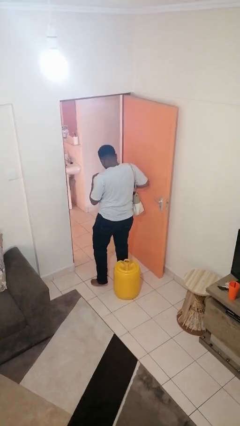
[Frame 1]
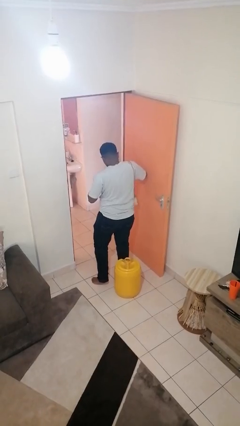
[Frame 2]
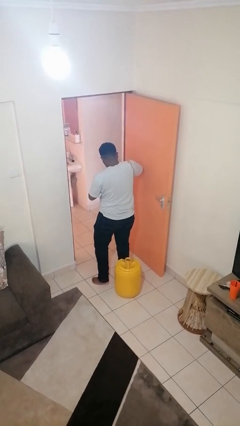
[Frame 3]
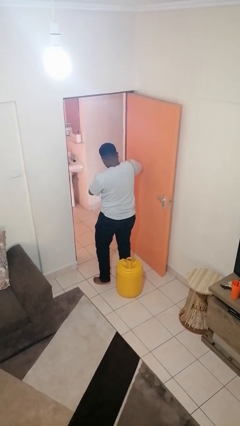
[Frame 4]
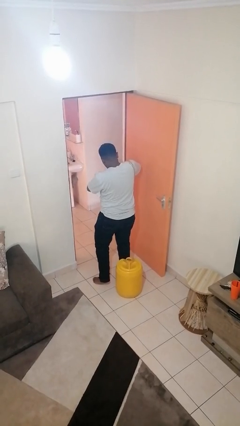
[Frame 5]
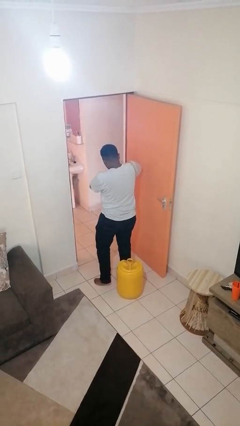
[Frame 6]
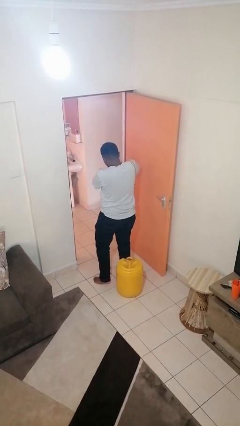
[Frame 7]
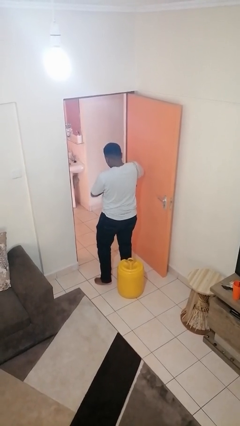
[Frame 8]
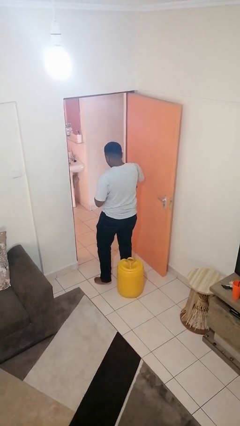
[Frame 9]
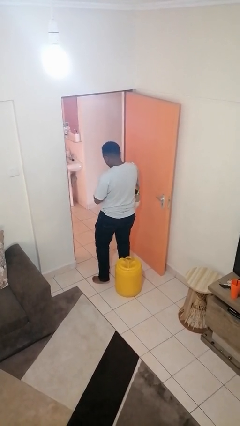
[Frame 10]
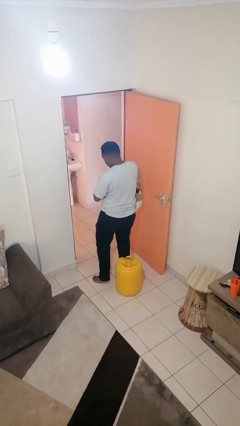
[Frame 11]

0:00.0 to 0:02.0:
person puts object into purse

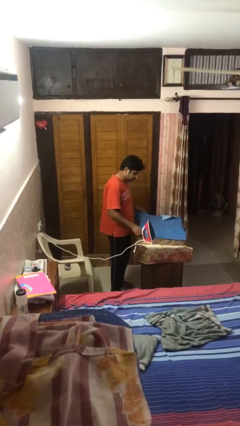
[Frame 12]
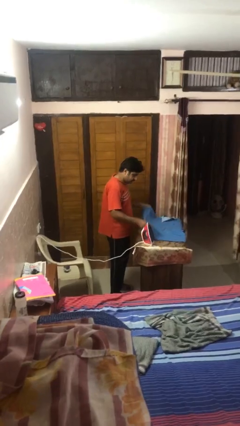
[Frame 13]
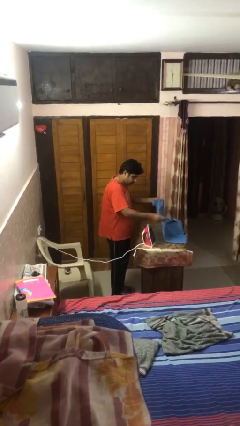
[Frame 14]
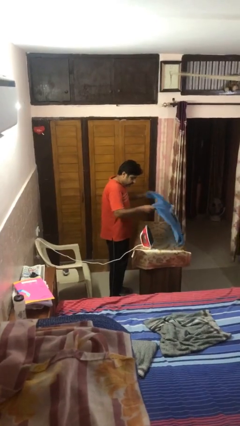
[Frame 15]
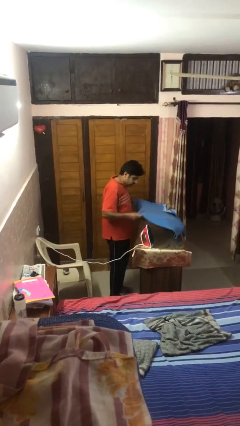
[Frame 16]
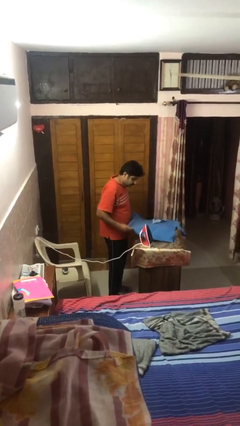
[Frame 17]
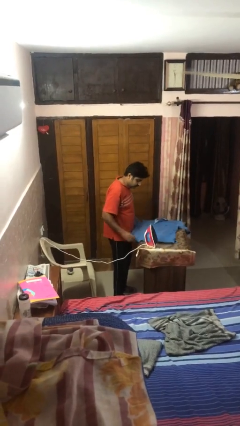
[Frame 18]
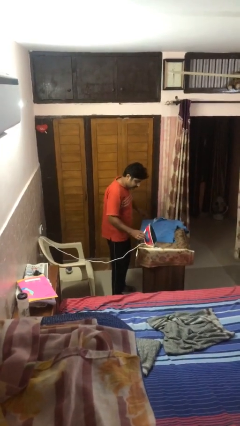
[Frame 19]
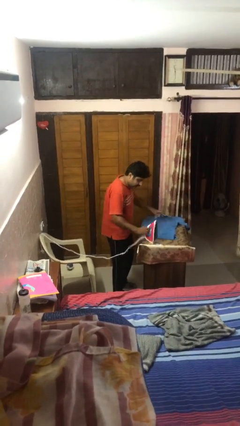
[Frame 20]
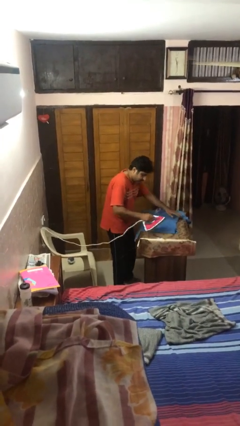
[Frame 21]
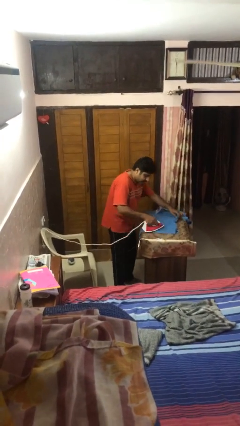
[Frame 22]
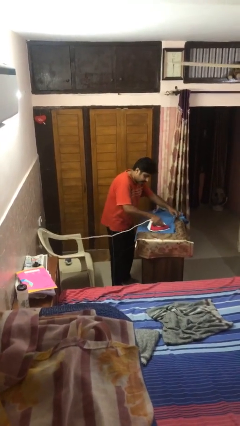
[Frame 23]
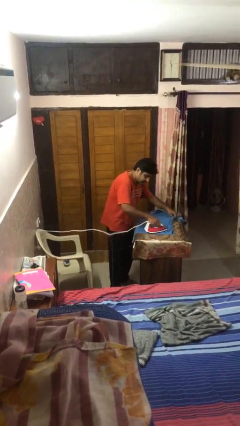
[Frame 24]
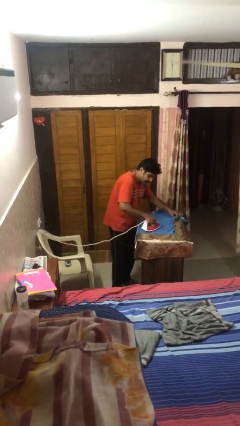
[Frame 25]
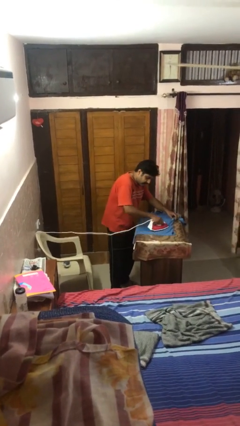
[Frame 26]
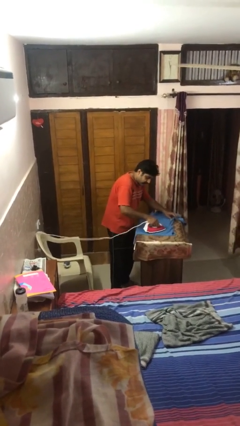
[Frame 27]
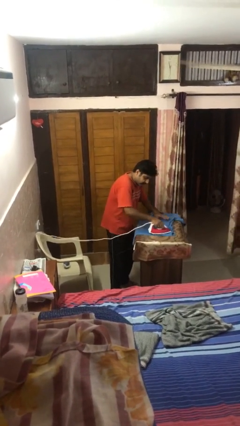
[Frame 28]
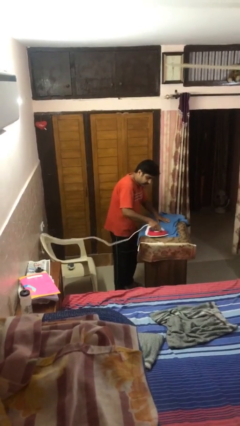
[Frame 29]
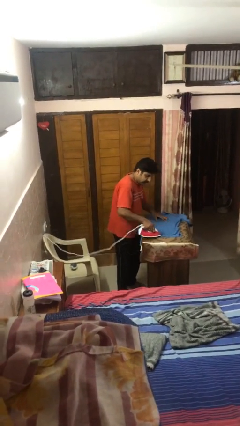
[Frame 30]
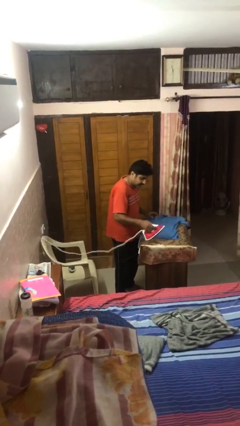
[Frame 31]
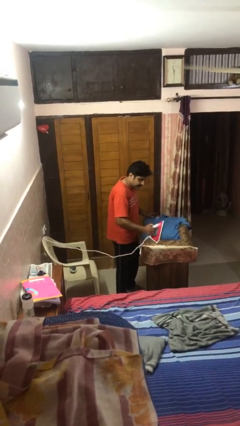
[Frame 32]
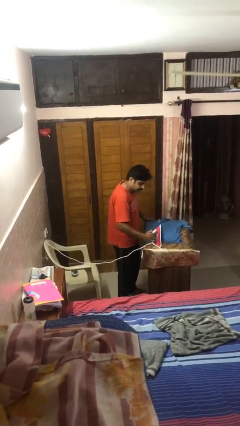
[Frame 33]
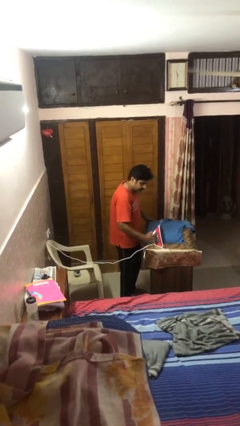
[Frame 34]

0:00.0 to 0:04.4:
person irons clothes

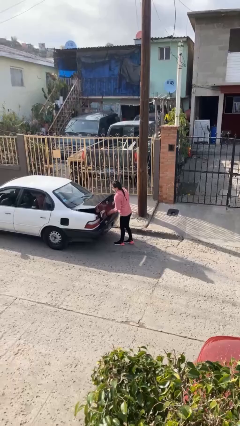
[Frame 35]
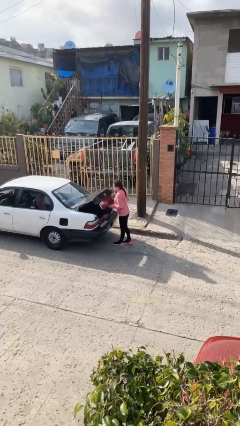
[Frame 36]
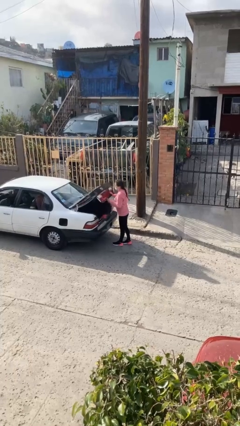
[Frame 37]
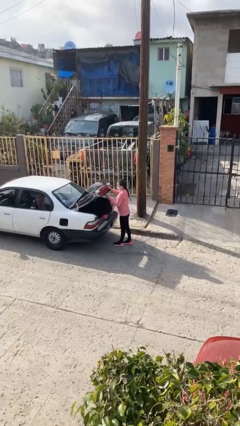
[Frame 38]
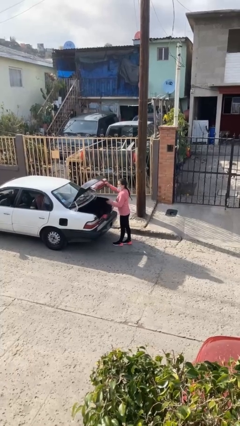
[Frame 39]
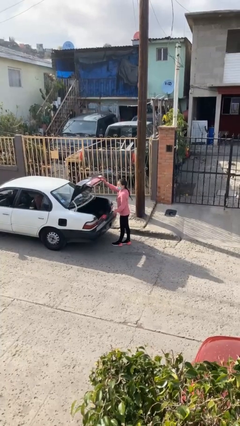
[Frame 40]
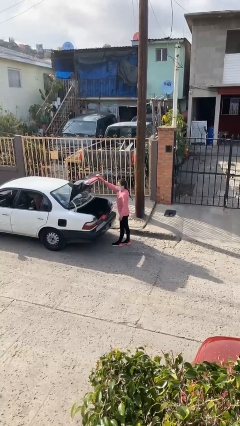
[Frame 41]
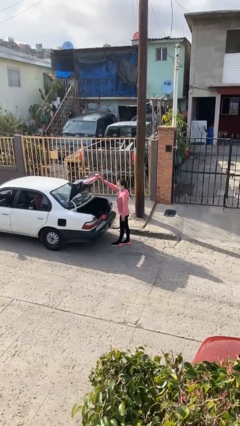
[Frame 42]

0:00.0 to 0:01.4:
person opens car trunk

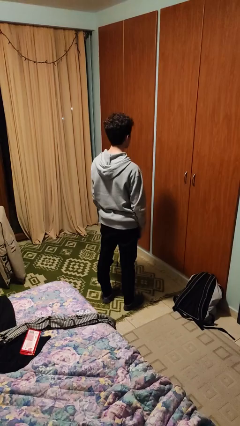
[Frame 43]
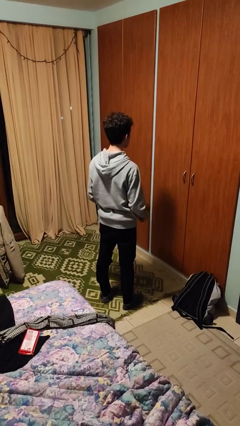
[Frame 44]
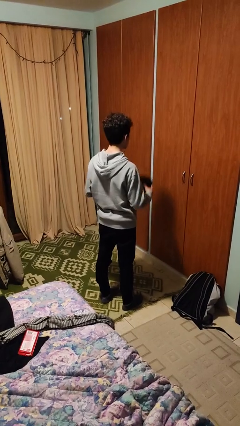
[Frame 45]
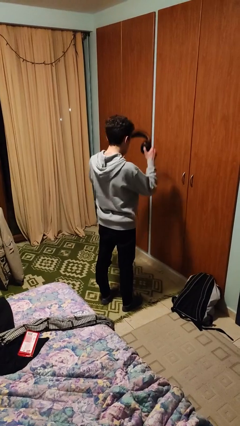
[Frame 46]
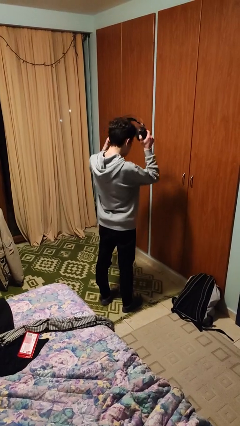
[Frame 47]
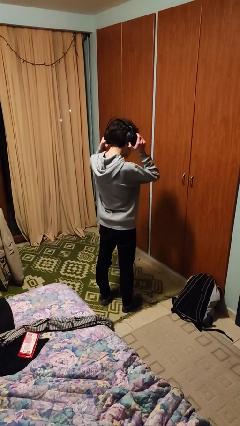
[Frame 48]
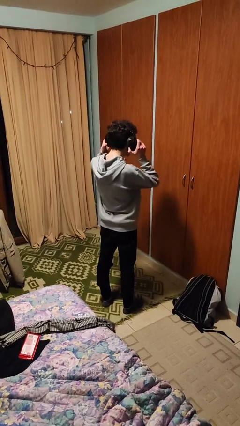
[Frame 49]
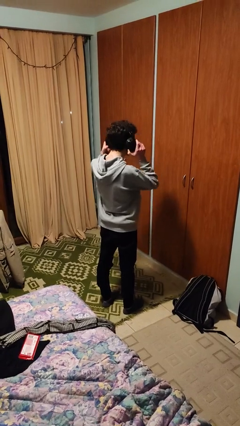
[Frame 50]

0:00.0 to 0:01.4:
person puts on headphones

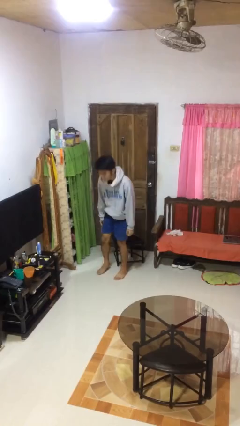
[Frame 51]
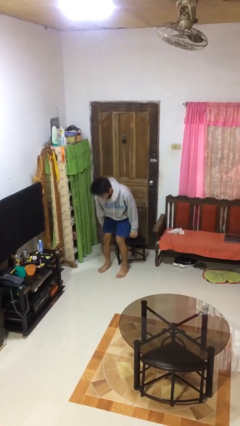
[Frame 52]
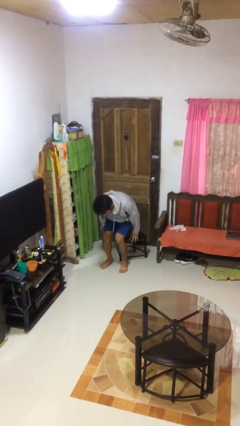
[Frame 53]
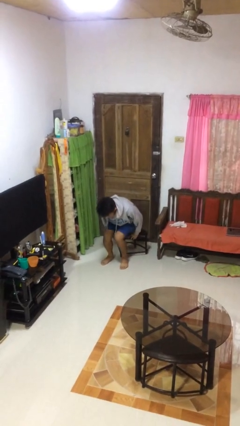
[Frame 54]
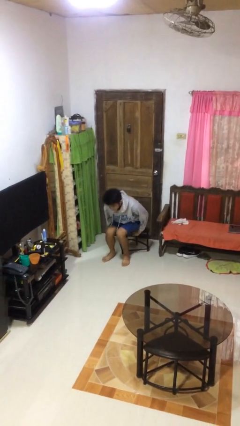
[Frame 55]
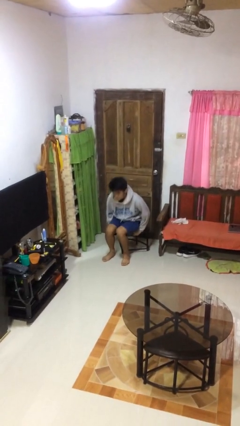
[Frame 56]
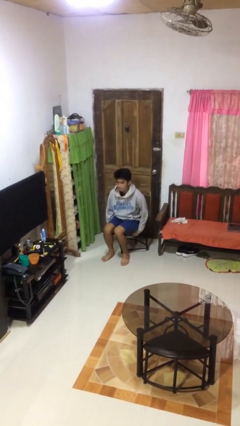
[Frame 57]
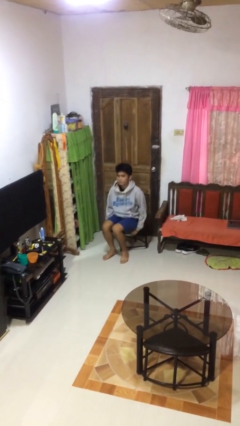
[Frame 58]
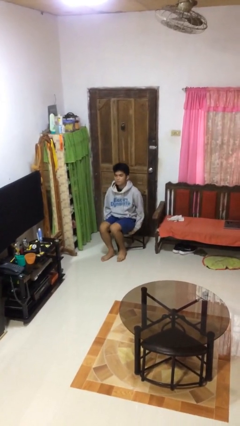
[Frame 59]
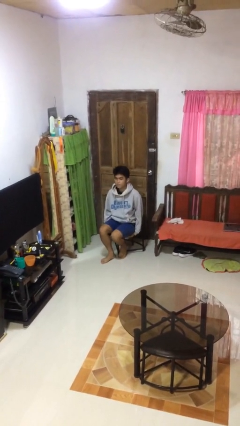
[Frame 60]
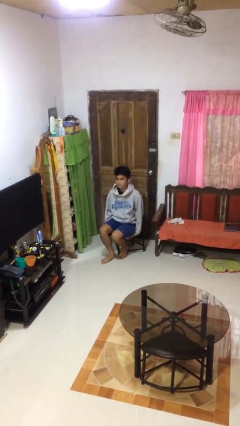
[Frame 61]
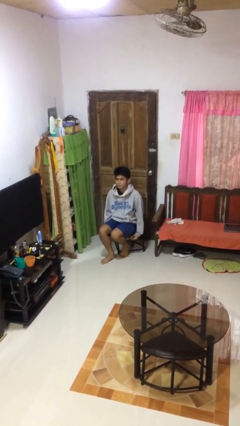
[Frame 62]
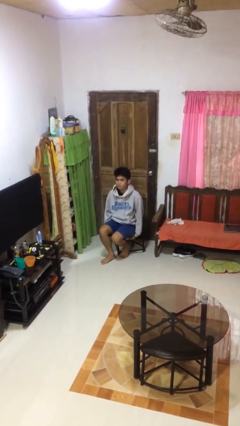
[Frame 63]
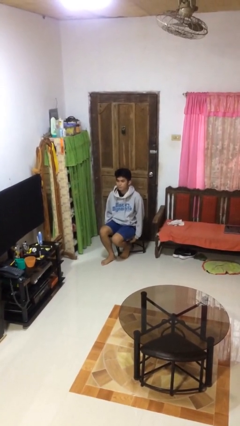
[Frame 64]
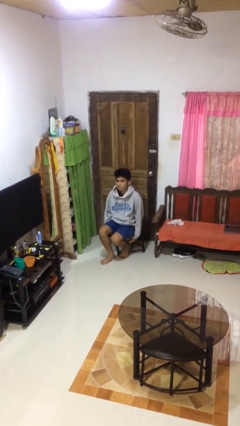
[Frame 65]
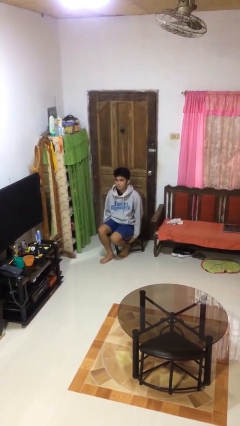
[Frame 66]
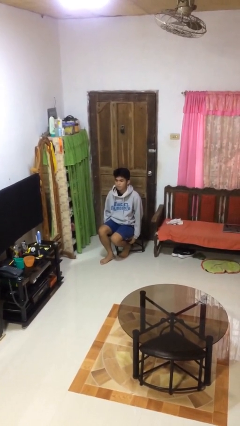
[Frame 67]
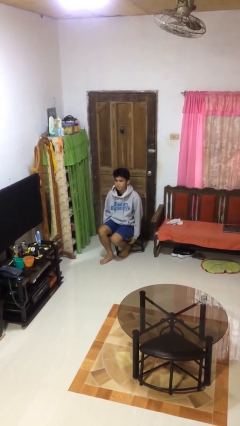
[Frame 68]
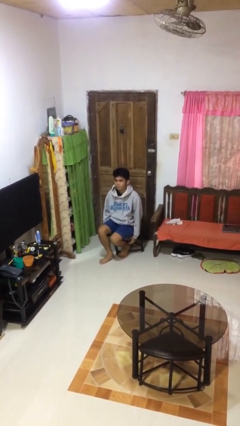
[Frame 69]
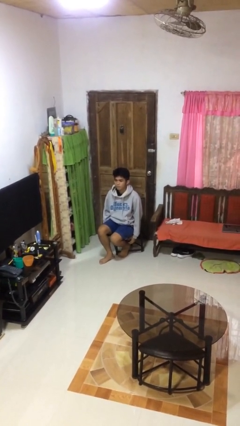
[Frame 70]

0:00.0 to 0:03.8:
person sits down

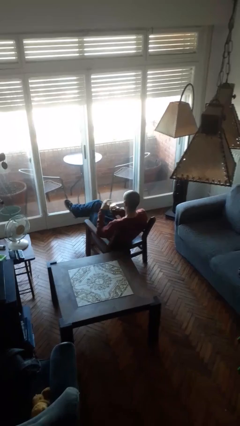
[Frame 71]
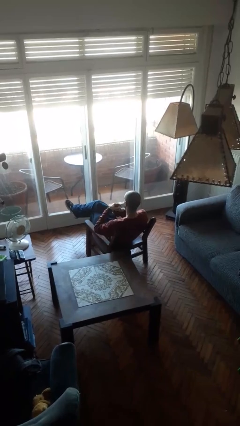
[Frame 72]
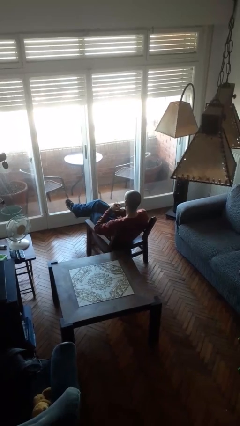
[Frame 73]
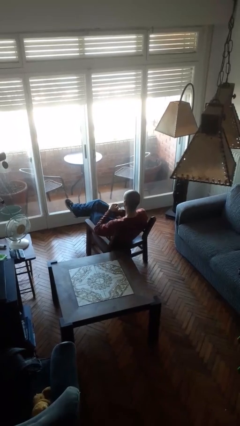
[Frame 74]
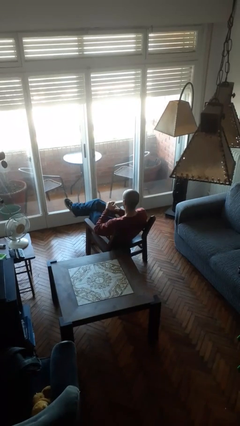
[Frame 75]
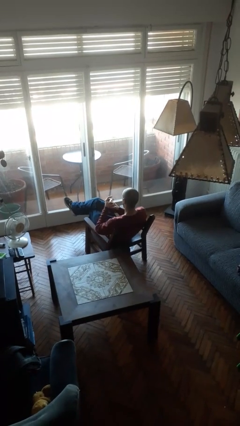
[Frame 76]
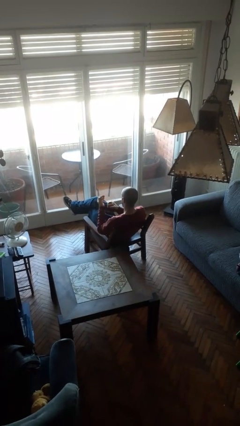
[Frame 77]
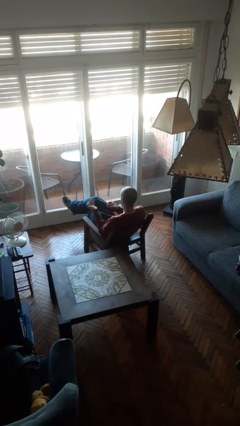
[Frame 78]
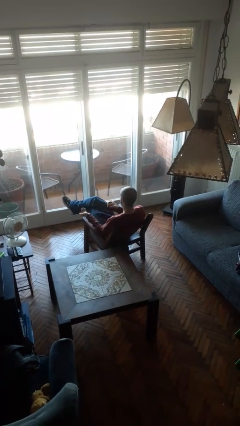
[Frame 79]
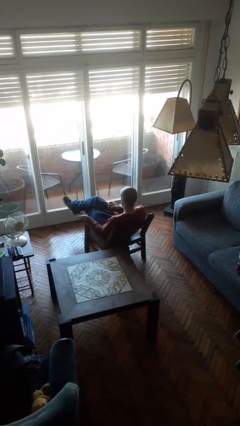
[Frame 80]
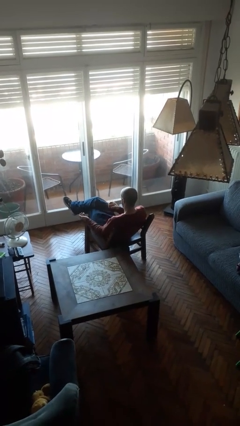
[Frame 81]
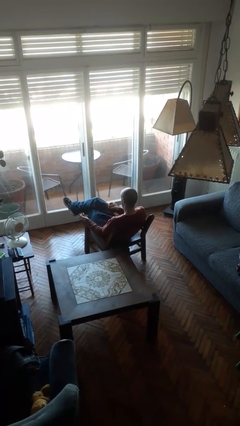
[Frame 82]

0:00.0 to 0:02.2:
person opens jar

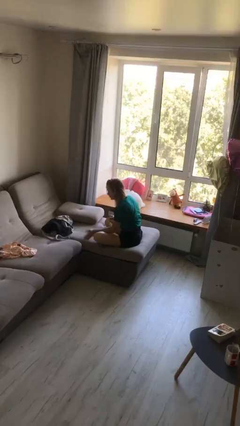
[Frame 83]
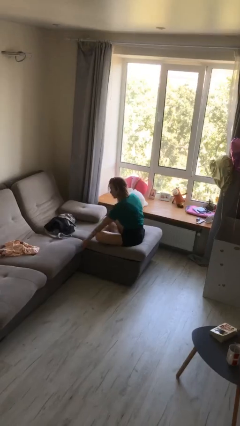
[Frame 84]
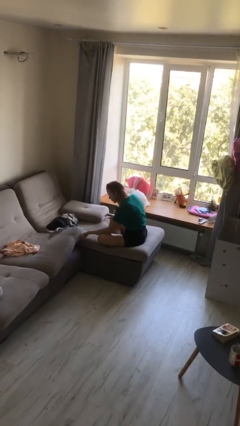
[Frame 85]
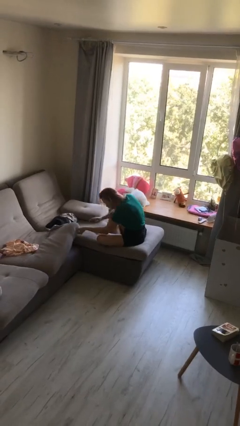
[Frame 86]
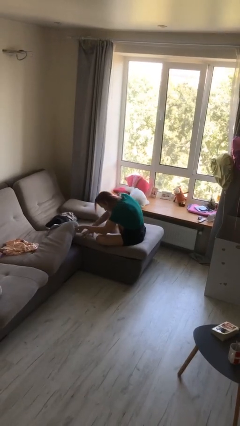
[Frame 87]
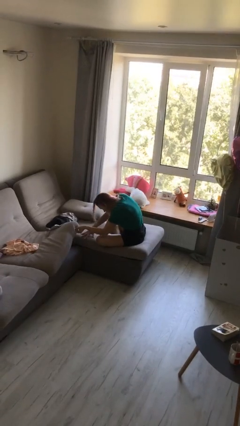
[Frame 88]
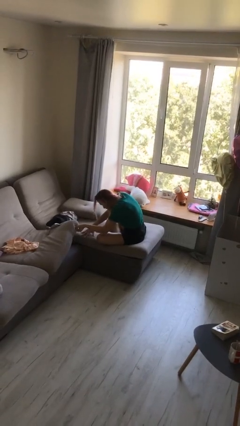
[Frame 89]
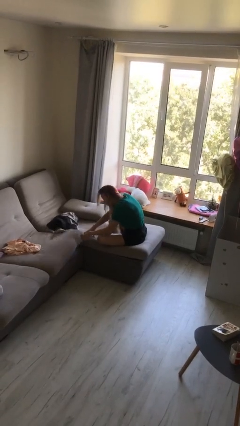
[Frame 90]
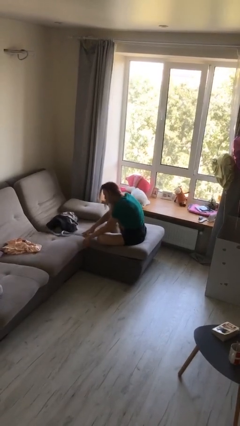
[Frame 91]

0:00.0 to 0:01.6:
person searches in couch

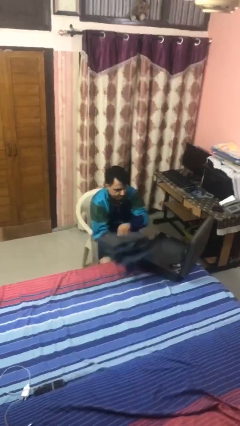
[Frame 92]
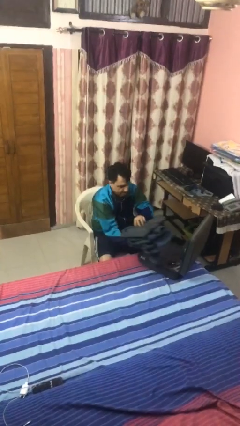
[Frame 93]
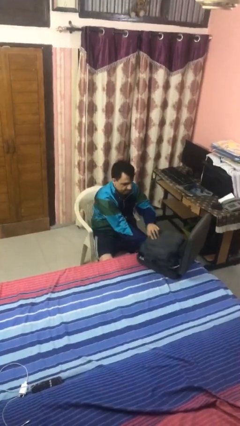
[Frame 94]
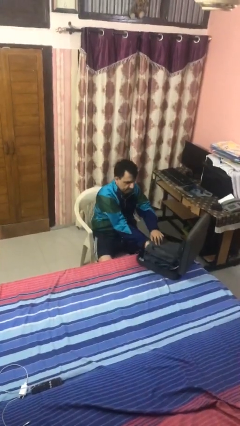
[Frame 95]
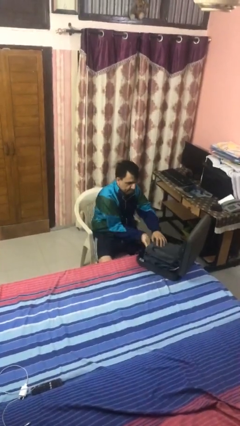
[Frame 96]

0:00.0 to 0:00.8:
person unloads clothes from suitcase
